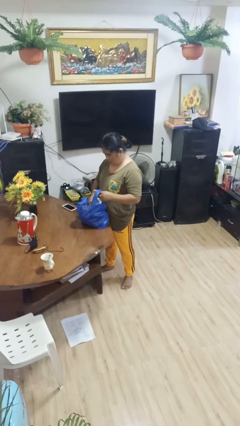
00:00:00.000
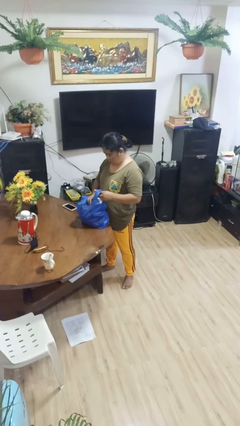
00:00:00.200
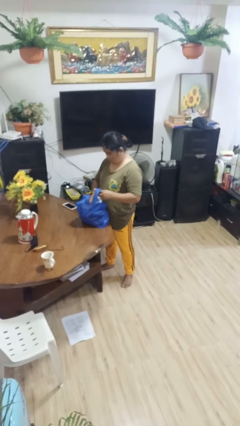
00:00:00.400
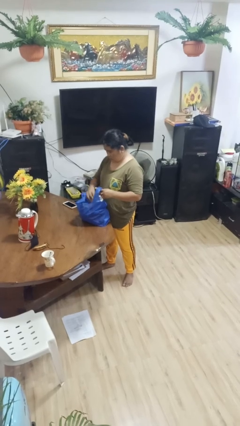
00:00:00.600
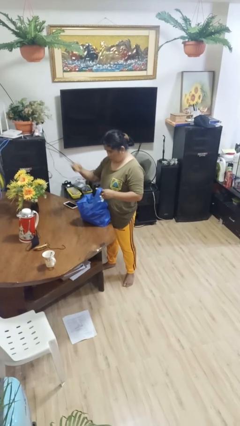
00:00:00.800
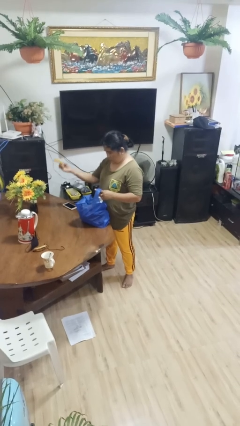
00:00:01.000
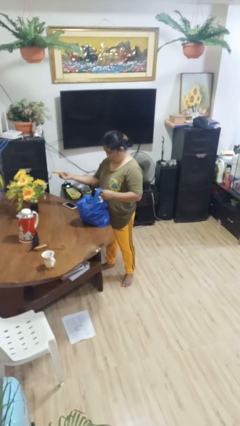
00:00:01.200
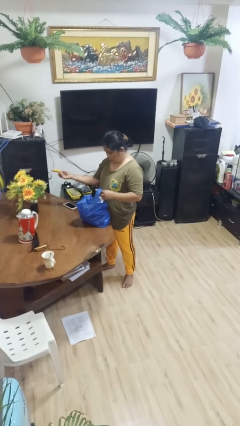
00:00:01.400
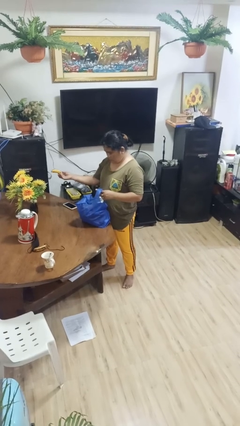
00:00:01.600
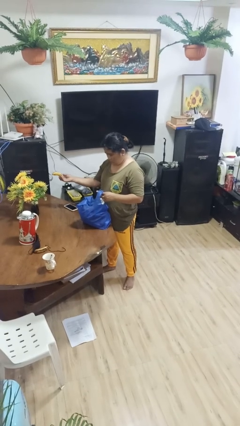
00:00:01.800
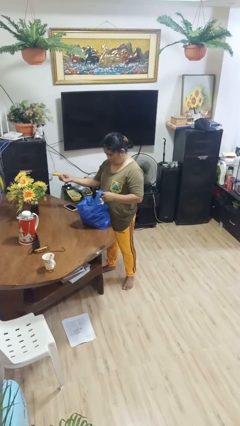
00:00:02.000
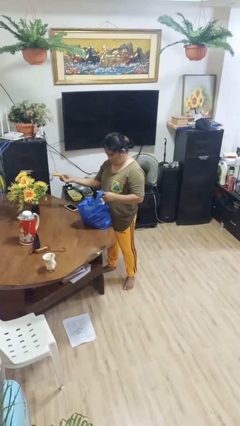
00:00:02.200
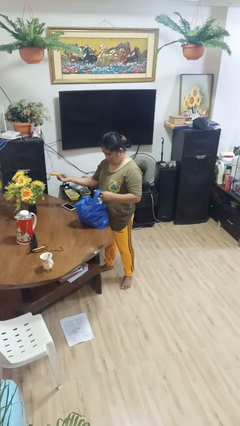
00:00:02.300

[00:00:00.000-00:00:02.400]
person takes object from bag

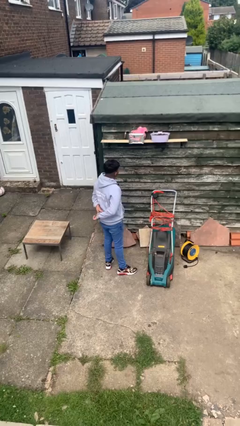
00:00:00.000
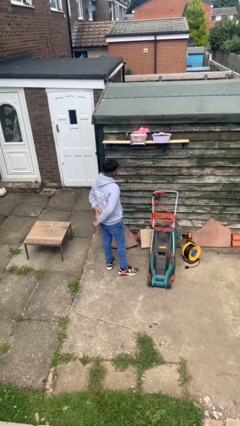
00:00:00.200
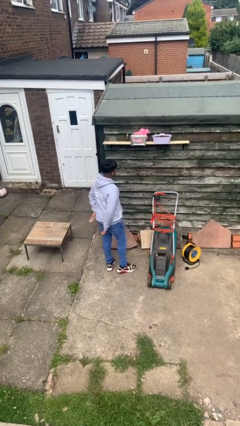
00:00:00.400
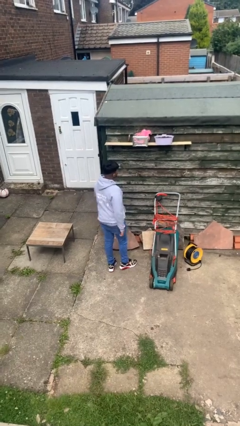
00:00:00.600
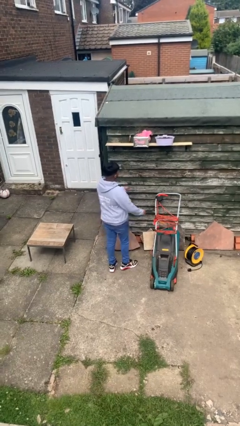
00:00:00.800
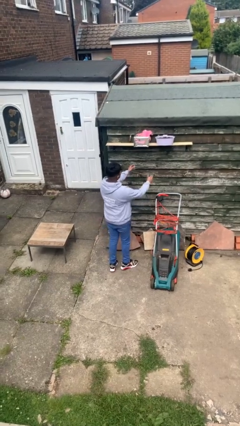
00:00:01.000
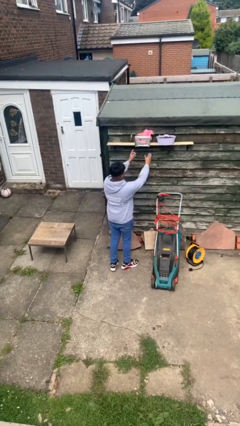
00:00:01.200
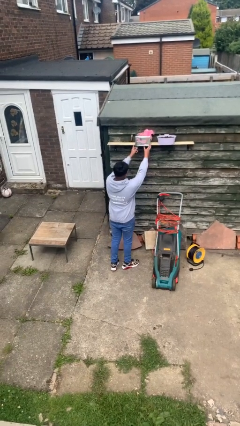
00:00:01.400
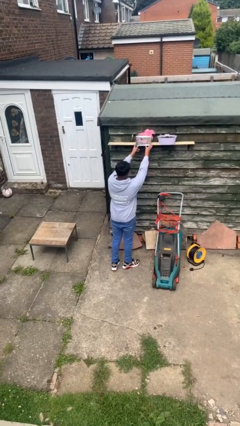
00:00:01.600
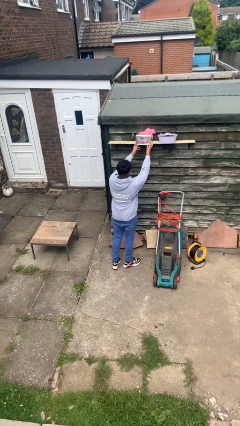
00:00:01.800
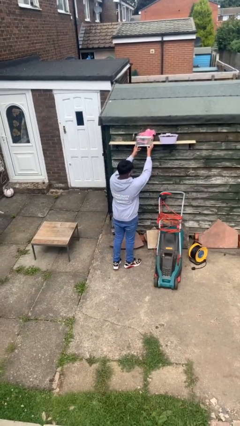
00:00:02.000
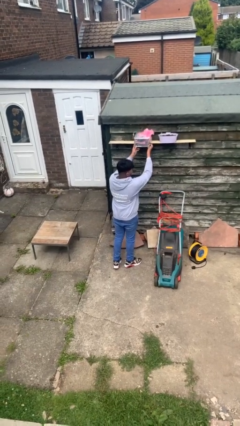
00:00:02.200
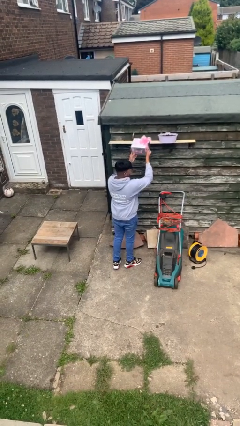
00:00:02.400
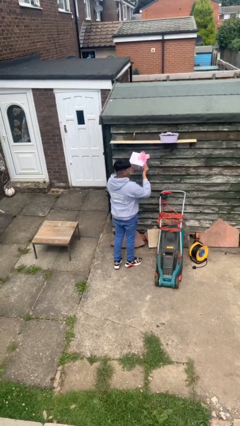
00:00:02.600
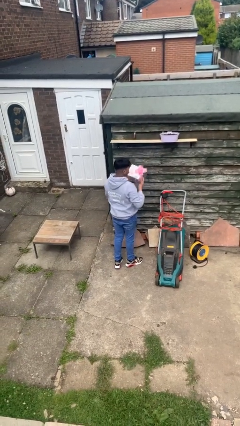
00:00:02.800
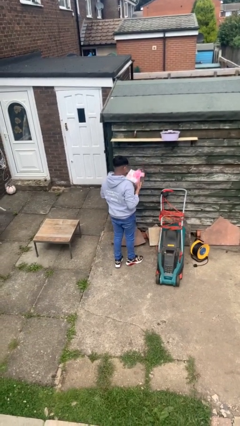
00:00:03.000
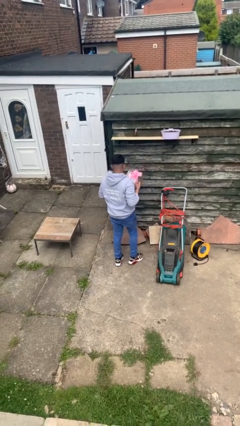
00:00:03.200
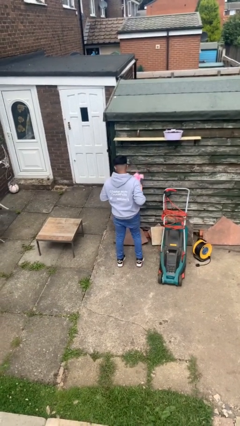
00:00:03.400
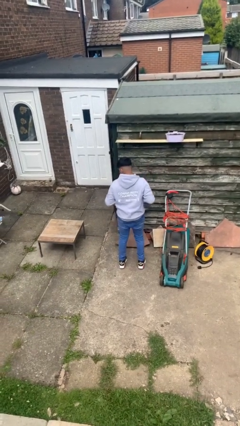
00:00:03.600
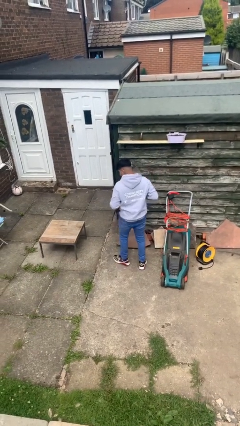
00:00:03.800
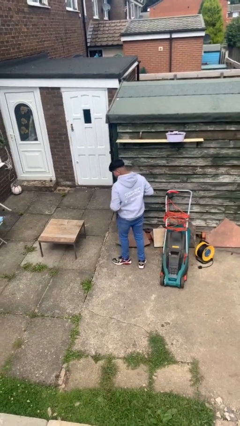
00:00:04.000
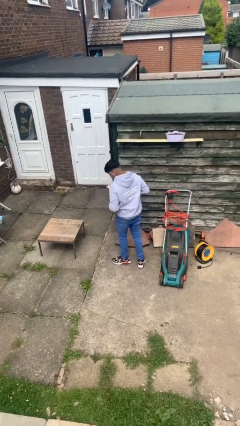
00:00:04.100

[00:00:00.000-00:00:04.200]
person picks up object from shelf

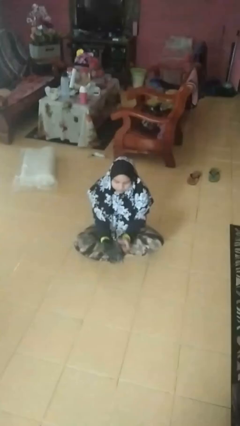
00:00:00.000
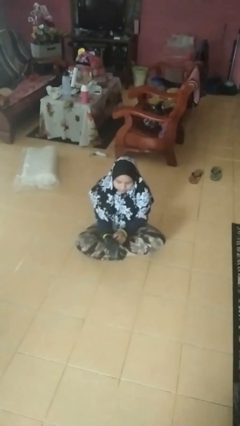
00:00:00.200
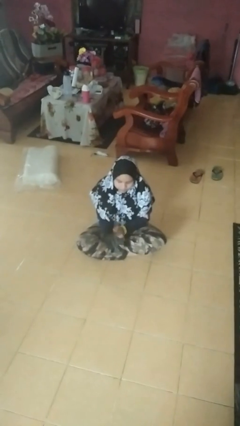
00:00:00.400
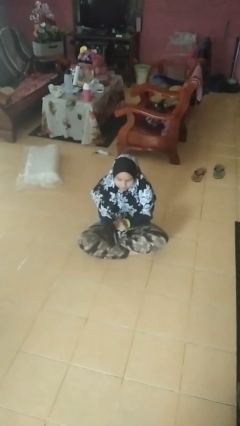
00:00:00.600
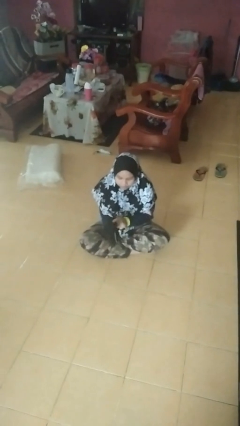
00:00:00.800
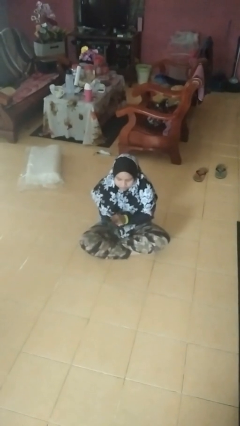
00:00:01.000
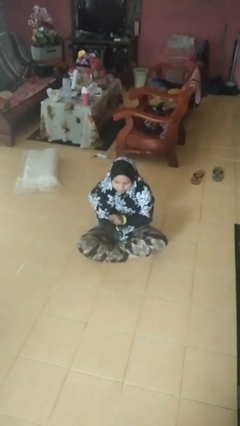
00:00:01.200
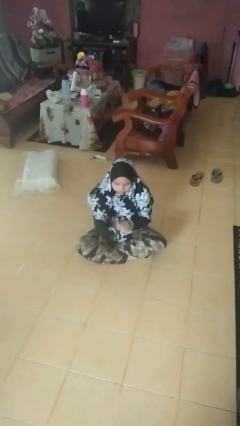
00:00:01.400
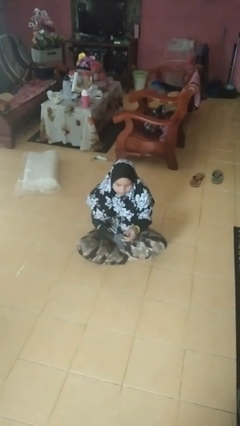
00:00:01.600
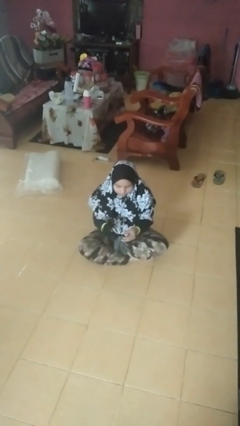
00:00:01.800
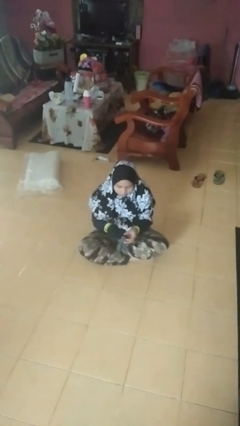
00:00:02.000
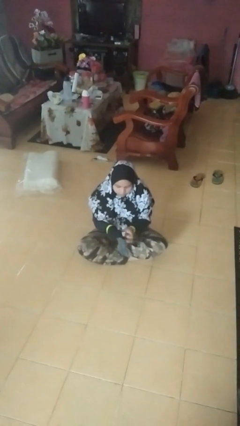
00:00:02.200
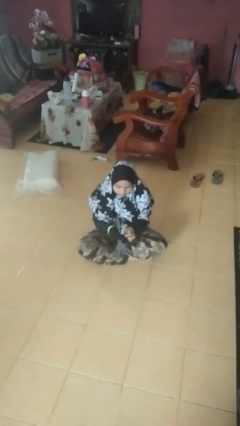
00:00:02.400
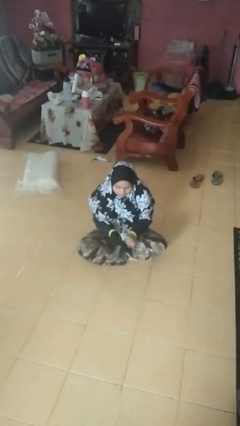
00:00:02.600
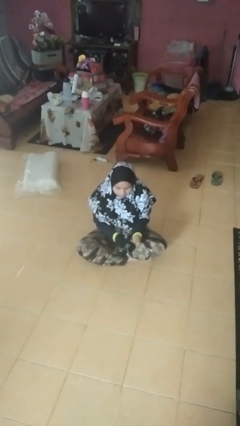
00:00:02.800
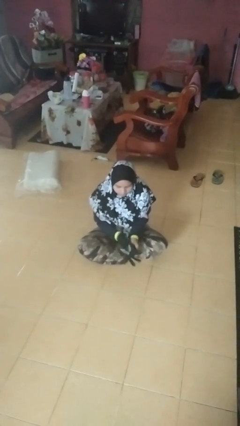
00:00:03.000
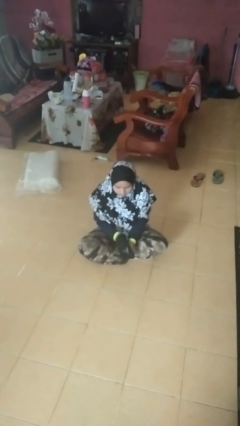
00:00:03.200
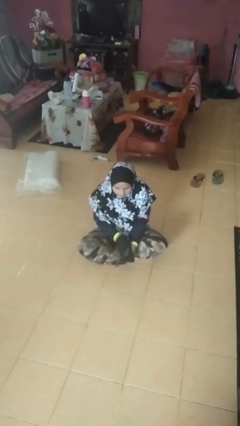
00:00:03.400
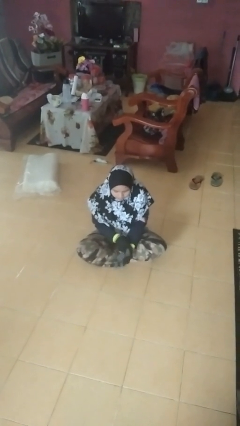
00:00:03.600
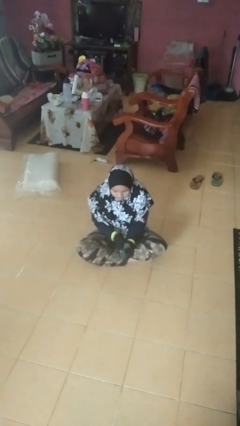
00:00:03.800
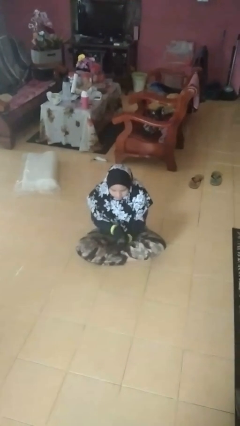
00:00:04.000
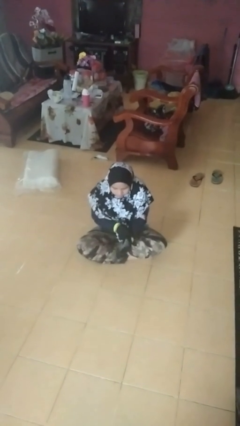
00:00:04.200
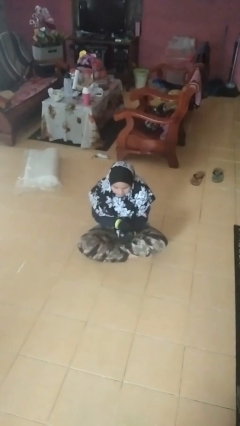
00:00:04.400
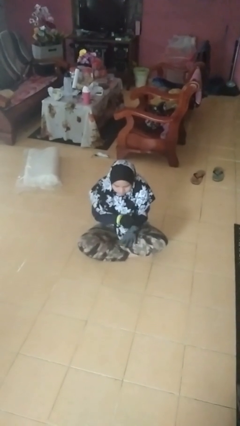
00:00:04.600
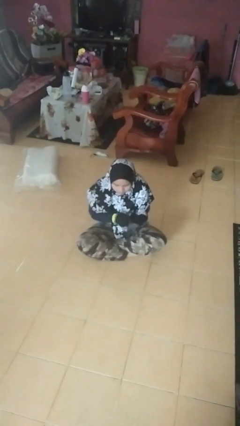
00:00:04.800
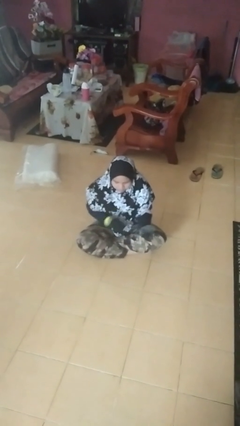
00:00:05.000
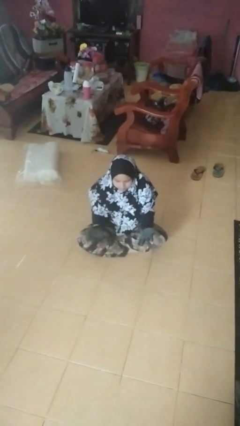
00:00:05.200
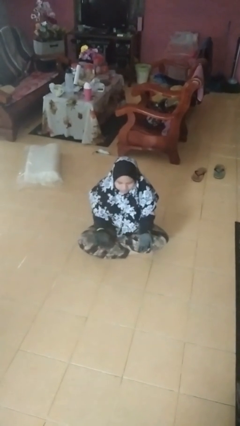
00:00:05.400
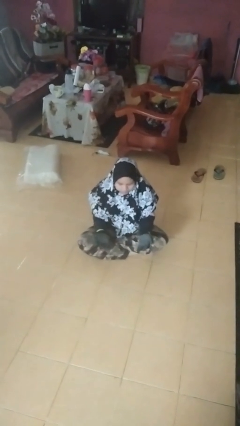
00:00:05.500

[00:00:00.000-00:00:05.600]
person puts on gloves

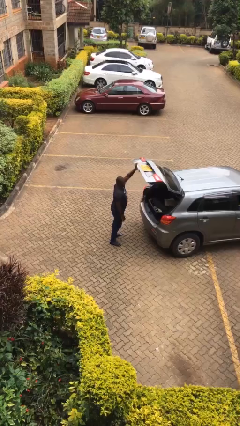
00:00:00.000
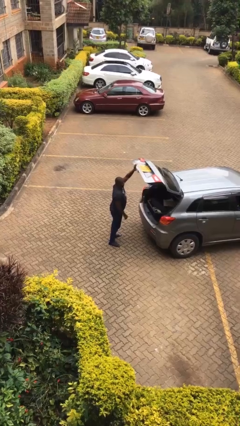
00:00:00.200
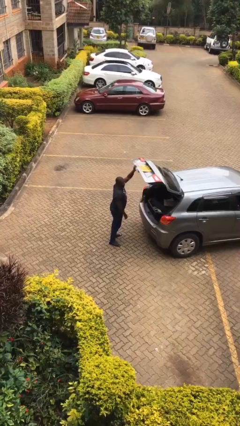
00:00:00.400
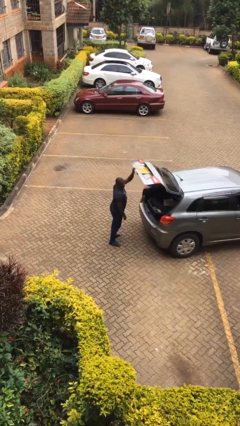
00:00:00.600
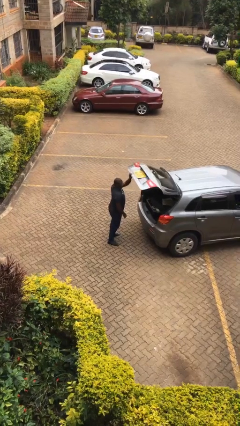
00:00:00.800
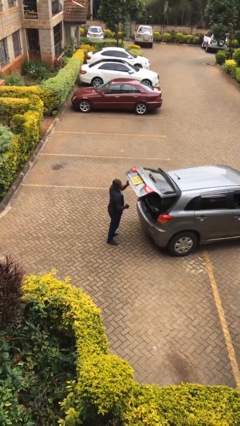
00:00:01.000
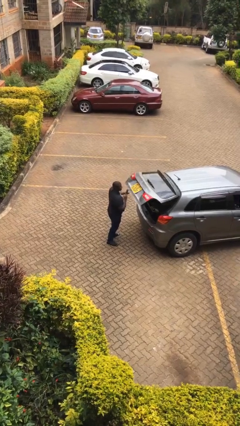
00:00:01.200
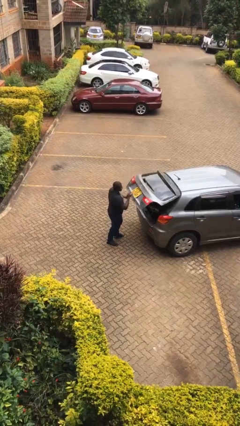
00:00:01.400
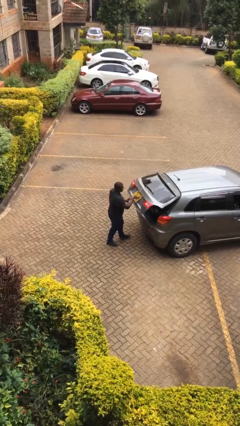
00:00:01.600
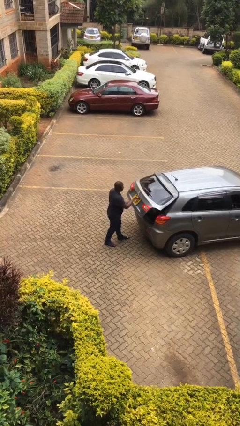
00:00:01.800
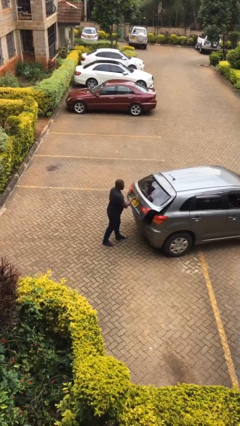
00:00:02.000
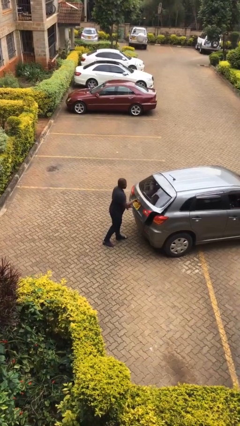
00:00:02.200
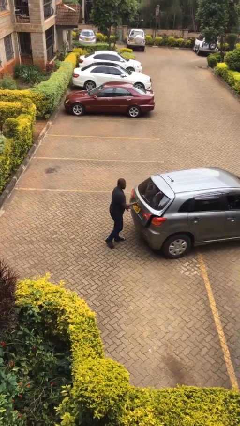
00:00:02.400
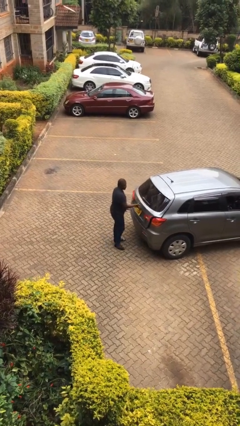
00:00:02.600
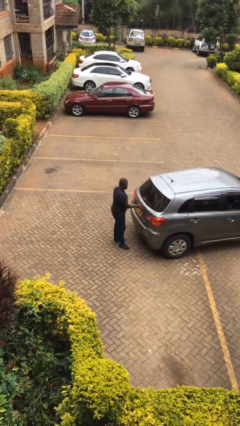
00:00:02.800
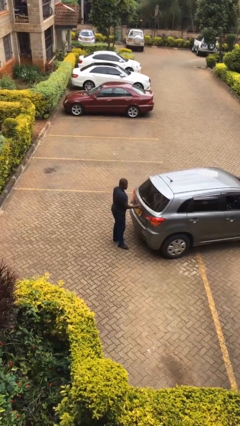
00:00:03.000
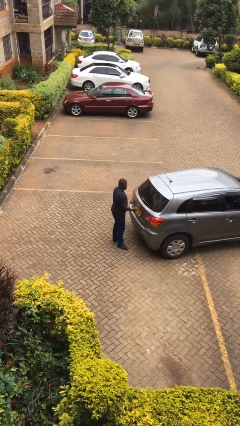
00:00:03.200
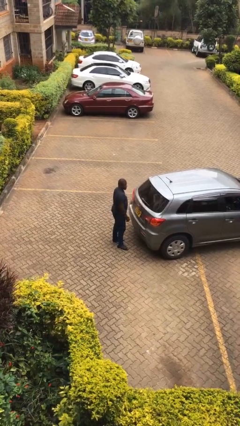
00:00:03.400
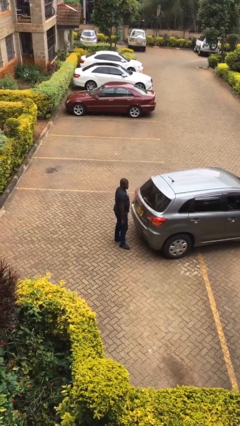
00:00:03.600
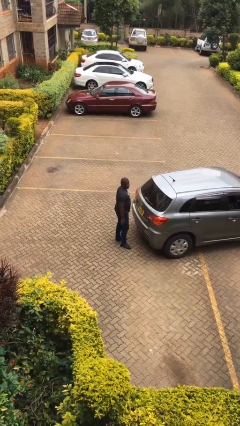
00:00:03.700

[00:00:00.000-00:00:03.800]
person closes car trunk

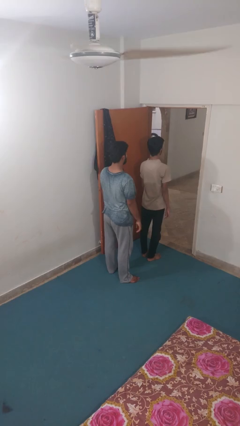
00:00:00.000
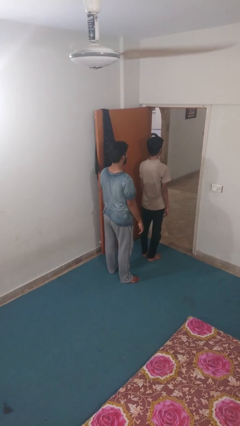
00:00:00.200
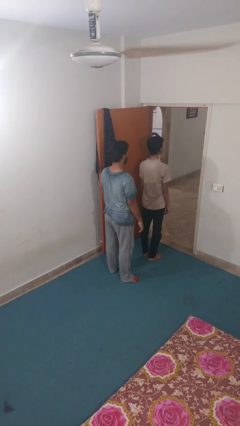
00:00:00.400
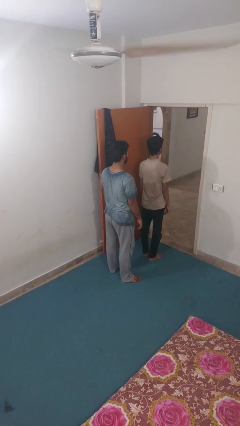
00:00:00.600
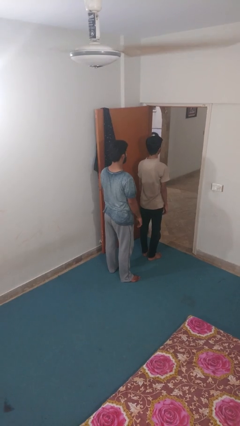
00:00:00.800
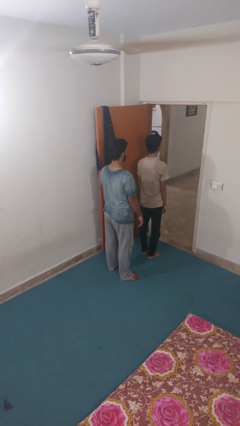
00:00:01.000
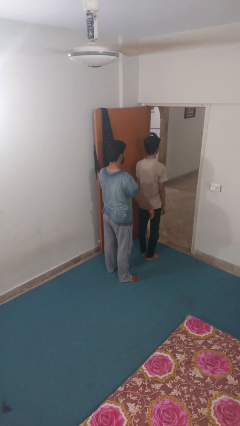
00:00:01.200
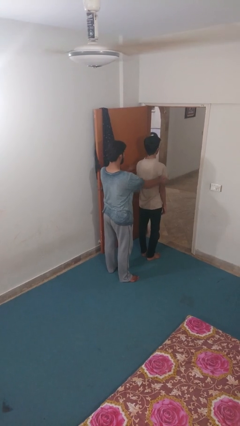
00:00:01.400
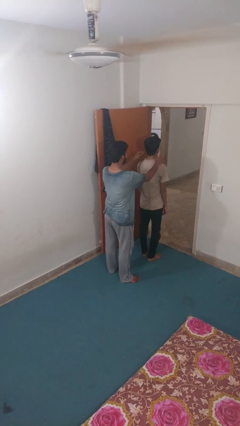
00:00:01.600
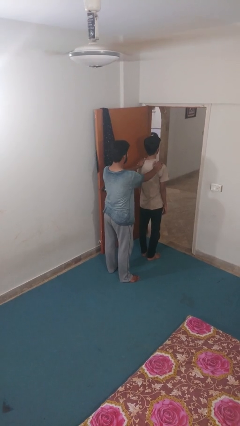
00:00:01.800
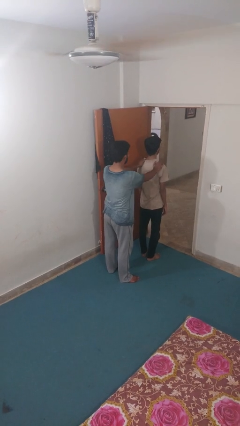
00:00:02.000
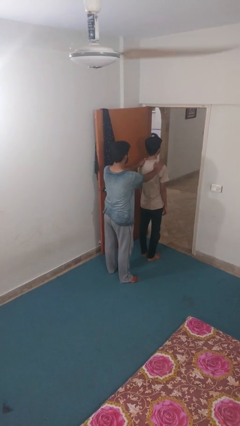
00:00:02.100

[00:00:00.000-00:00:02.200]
person grabs person by shoulder
